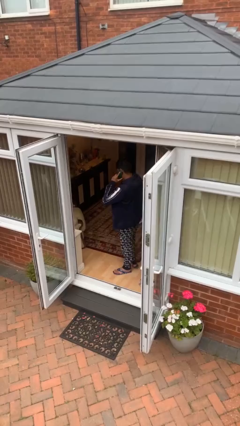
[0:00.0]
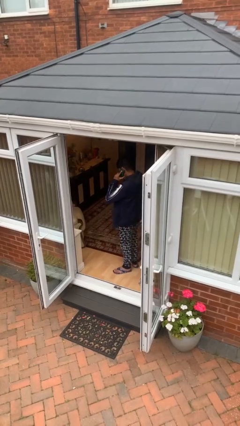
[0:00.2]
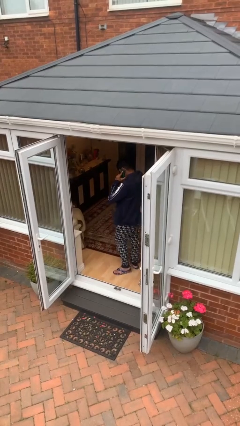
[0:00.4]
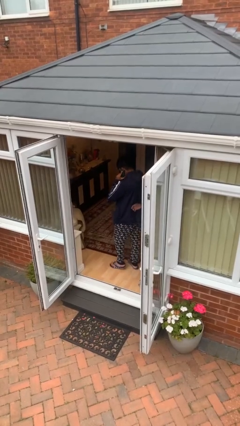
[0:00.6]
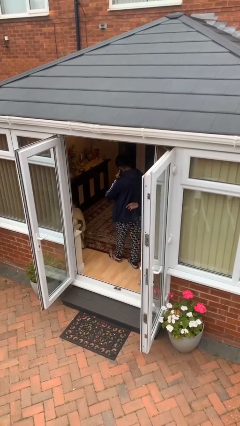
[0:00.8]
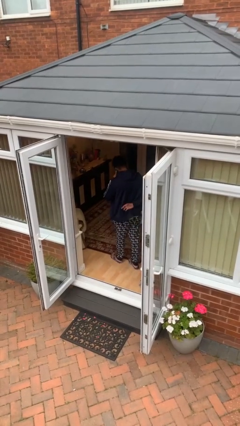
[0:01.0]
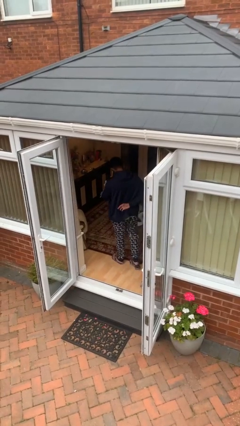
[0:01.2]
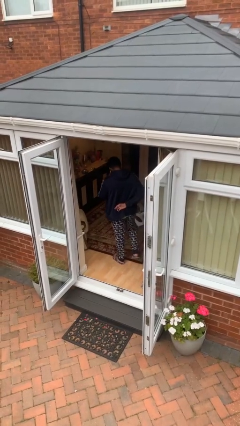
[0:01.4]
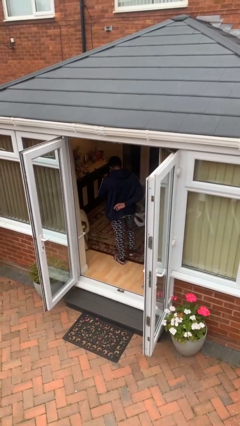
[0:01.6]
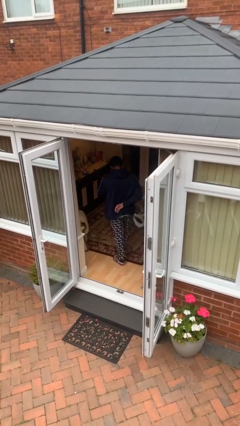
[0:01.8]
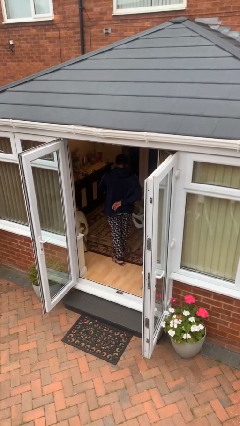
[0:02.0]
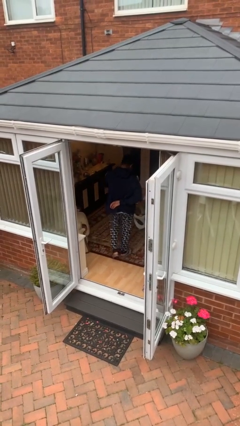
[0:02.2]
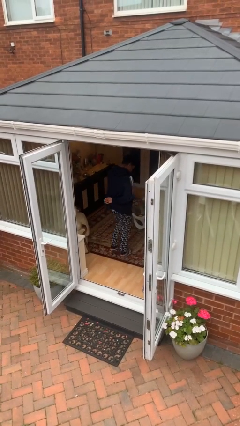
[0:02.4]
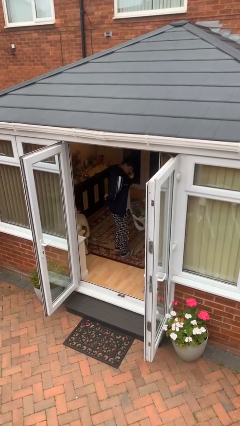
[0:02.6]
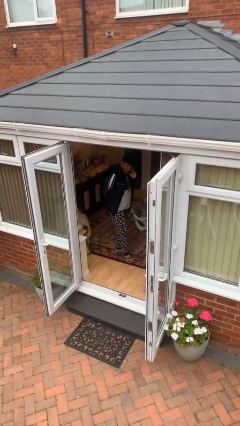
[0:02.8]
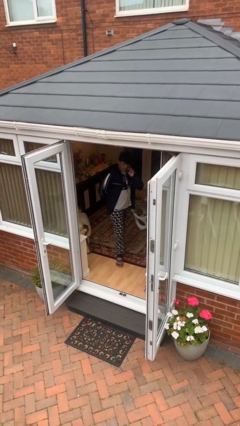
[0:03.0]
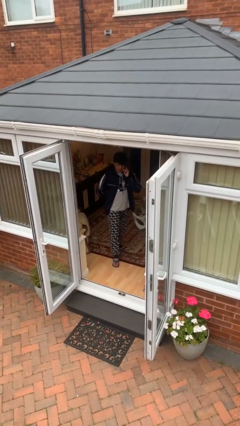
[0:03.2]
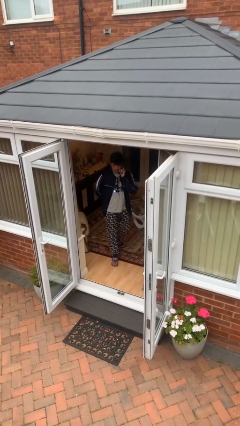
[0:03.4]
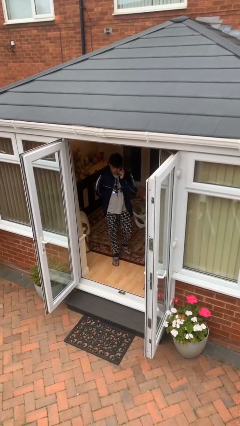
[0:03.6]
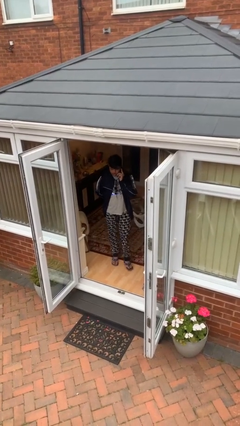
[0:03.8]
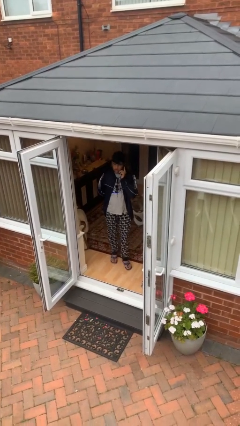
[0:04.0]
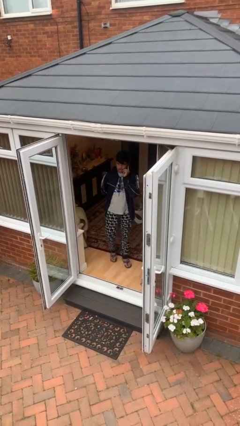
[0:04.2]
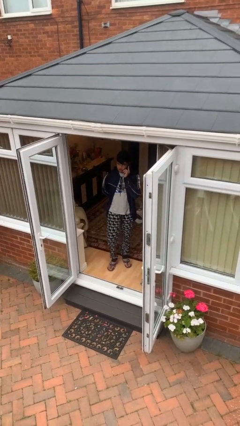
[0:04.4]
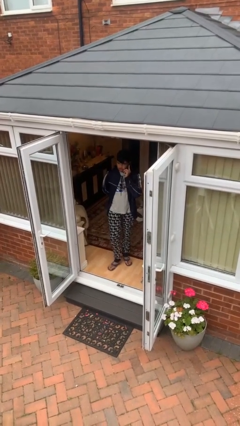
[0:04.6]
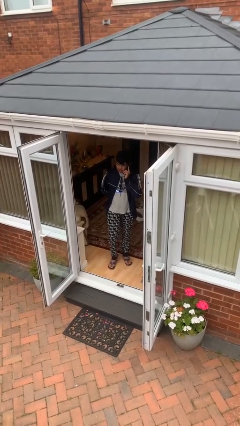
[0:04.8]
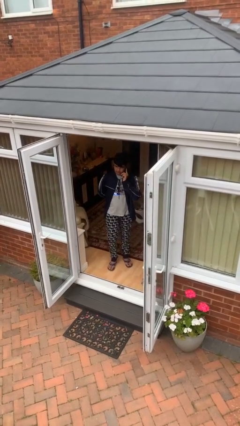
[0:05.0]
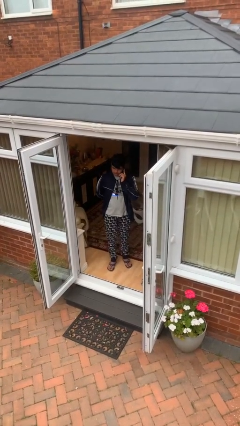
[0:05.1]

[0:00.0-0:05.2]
person talks on phone

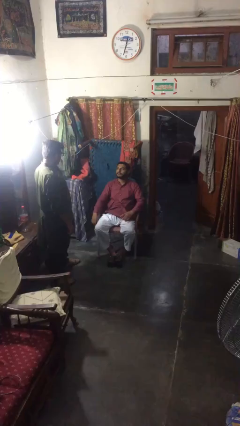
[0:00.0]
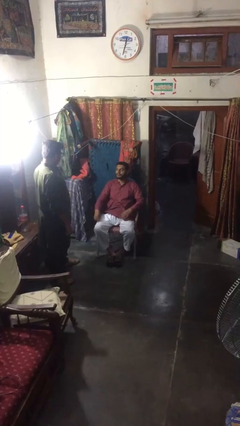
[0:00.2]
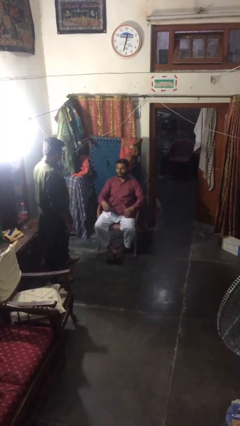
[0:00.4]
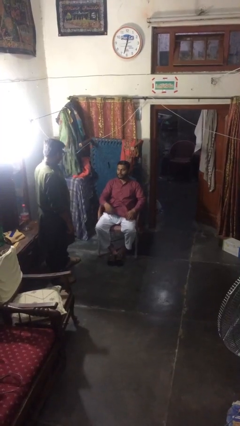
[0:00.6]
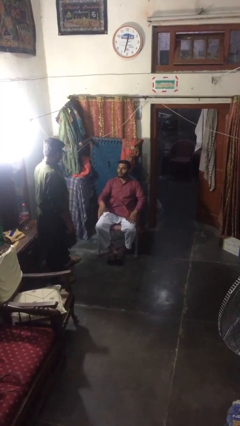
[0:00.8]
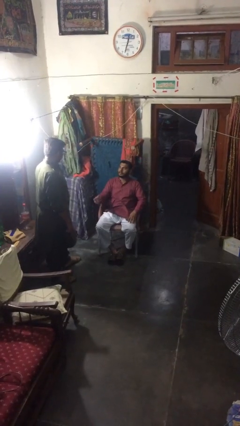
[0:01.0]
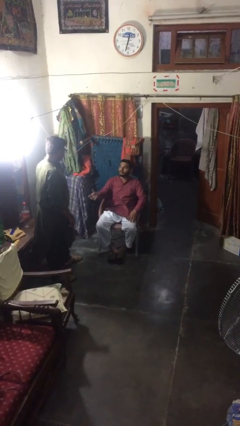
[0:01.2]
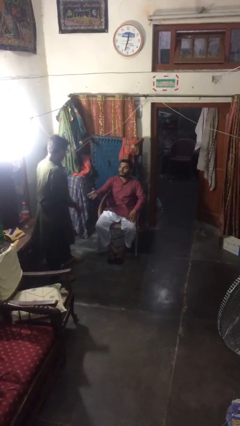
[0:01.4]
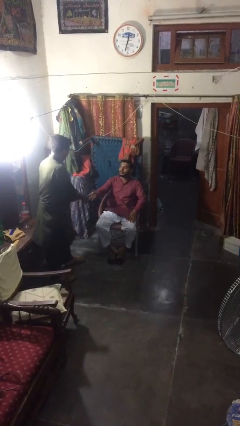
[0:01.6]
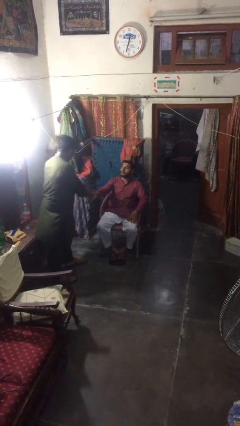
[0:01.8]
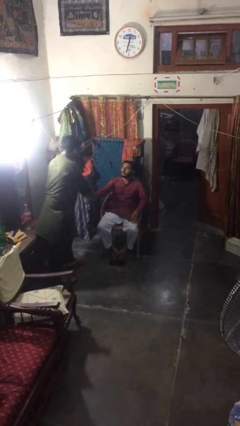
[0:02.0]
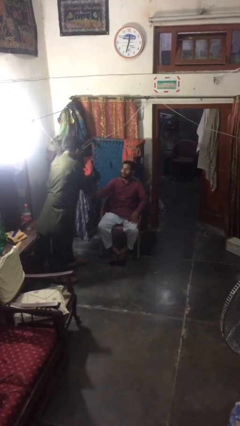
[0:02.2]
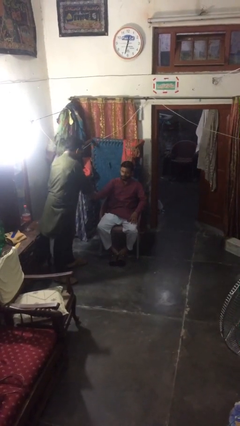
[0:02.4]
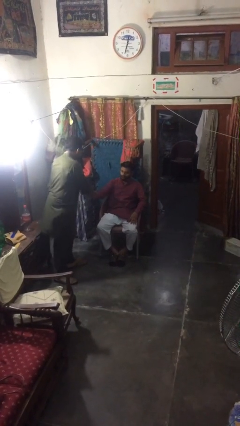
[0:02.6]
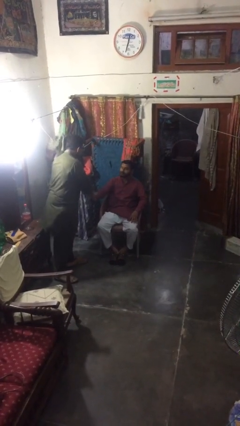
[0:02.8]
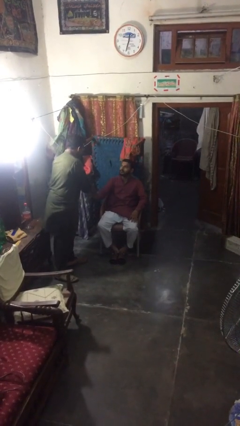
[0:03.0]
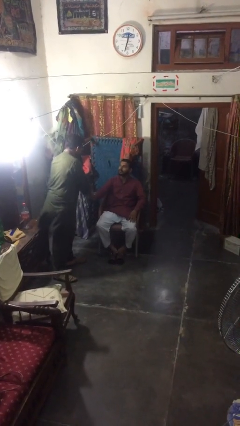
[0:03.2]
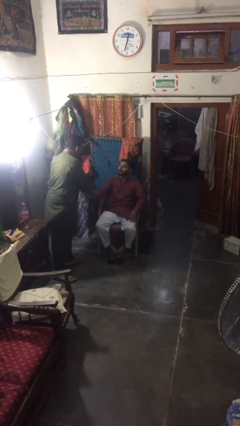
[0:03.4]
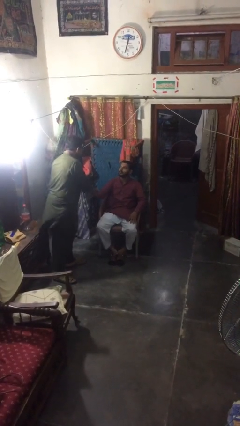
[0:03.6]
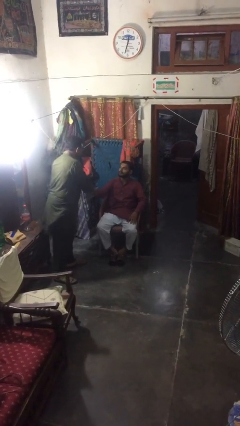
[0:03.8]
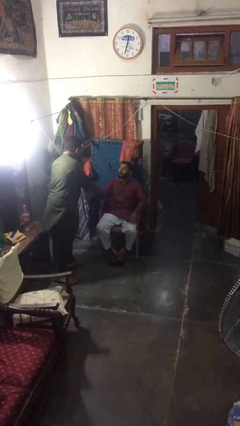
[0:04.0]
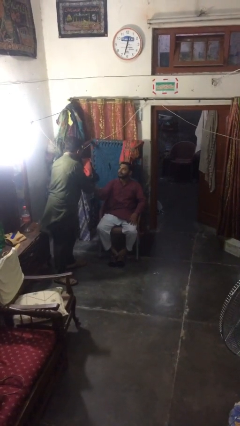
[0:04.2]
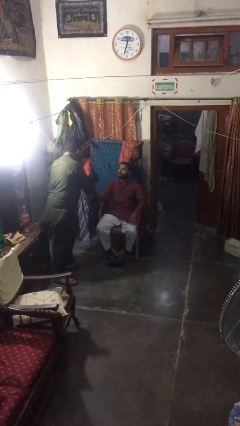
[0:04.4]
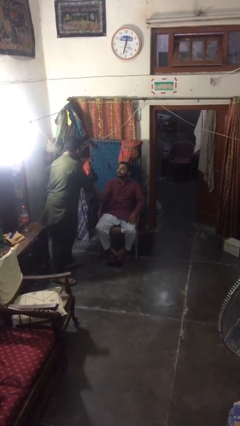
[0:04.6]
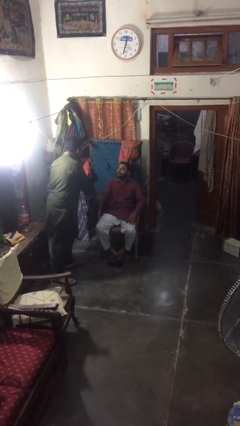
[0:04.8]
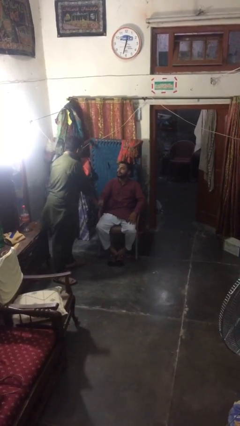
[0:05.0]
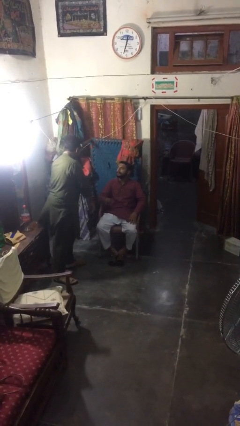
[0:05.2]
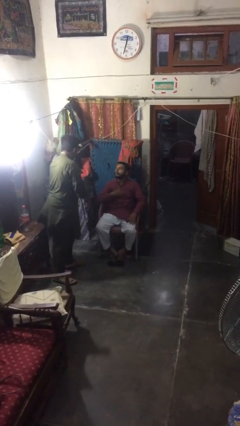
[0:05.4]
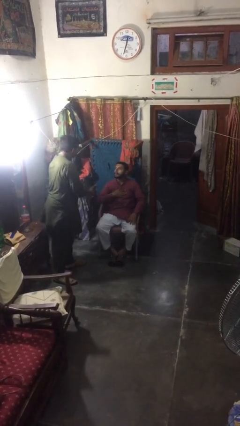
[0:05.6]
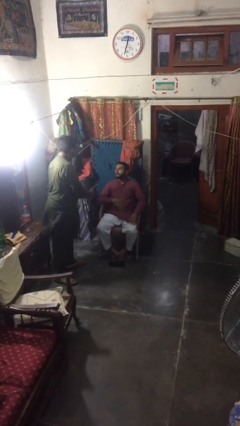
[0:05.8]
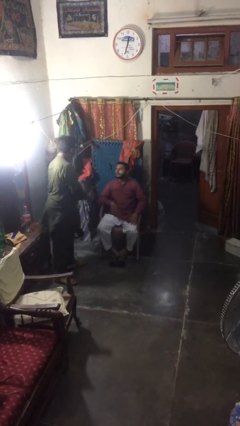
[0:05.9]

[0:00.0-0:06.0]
person shakes hand

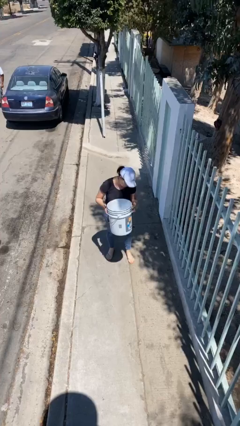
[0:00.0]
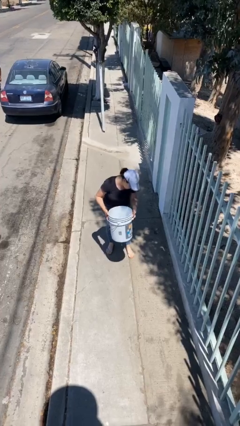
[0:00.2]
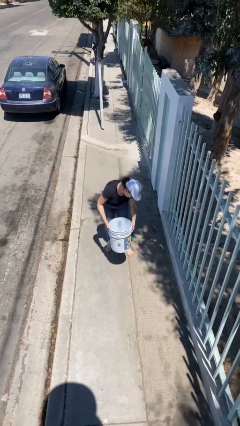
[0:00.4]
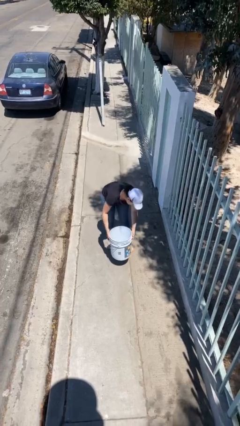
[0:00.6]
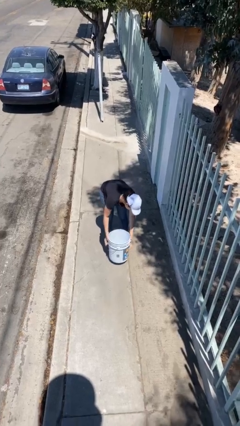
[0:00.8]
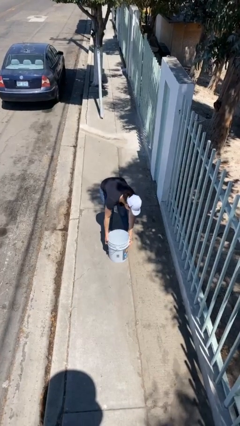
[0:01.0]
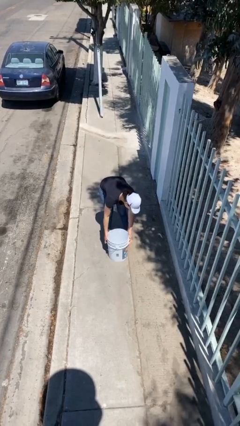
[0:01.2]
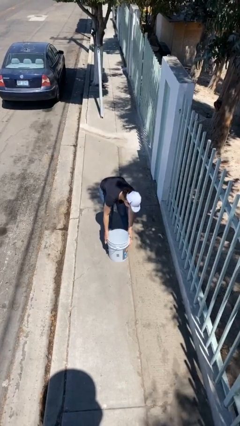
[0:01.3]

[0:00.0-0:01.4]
person puts down object on floor

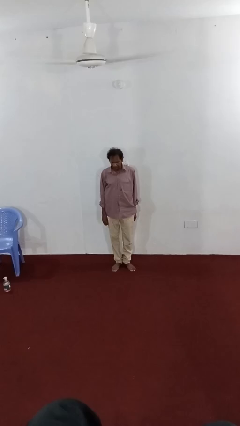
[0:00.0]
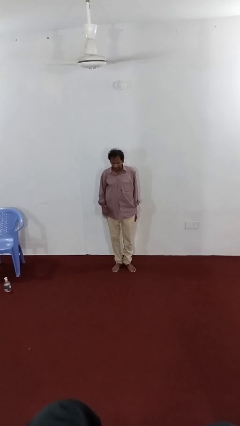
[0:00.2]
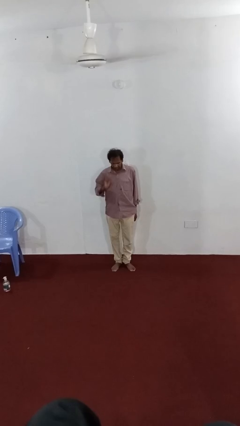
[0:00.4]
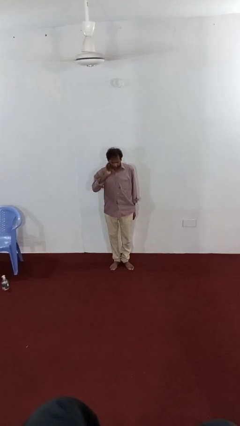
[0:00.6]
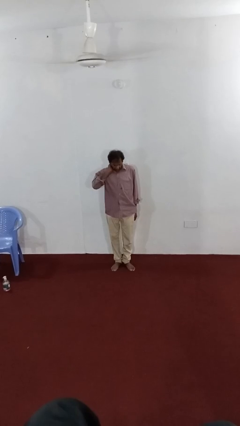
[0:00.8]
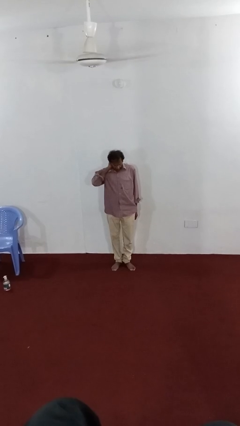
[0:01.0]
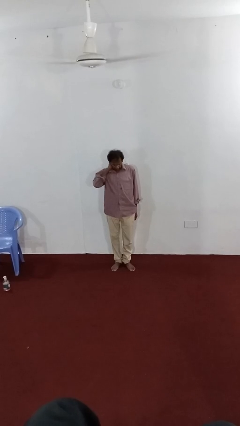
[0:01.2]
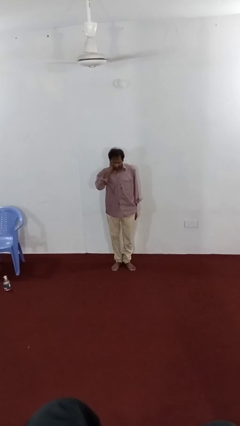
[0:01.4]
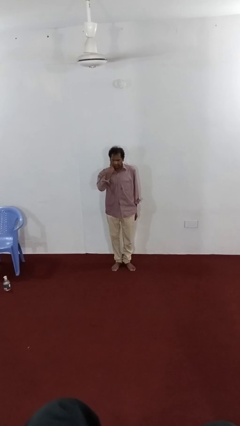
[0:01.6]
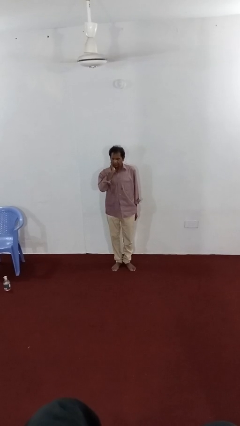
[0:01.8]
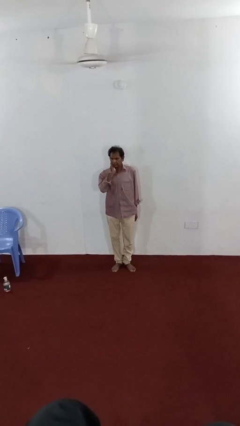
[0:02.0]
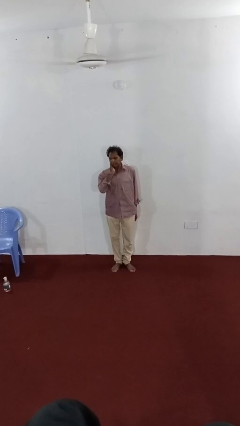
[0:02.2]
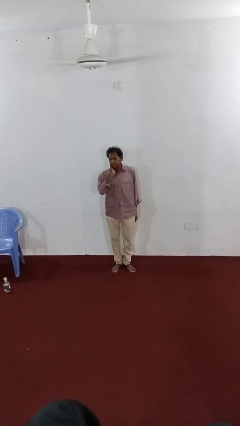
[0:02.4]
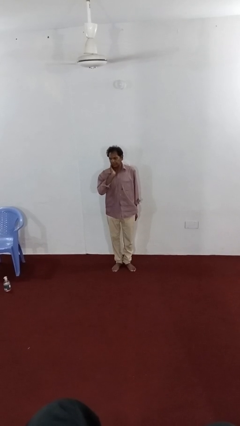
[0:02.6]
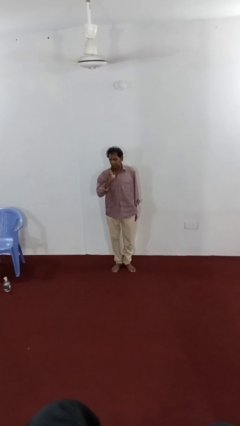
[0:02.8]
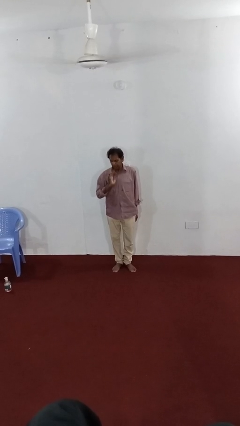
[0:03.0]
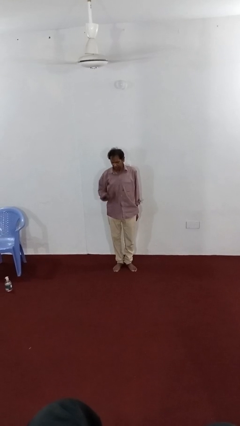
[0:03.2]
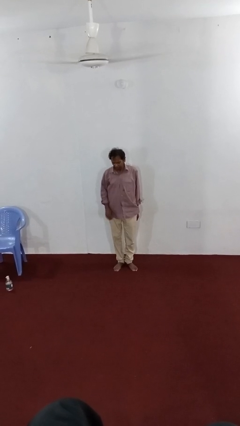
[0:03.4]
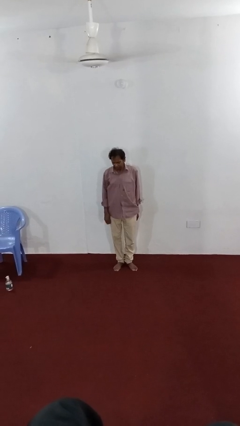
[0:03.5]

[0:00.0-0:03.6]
person rubs neck

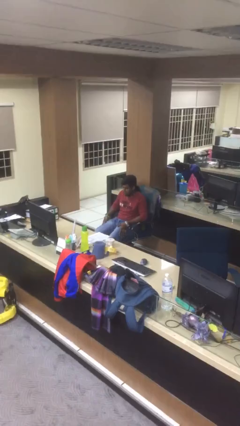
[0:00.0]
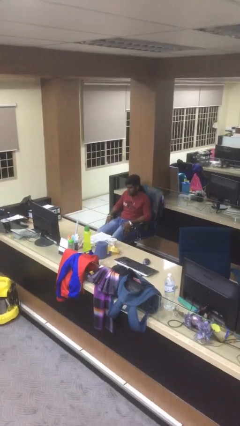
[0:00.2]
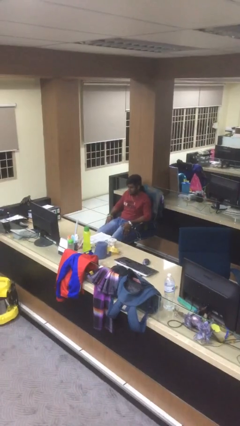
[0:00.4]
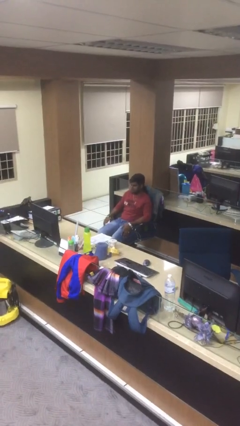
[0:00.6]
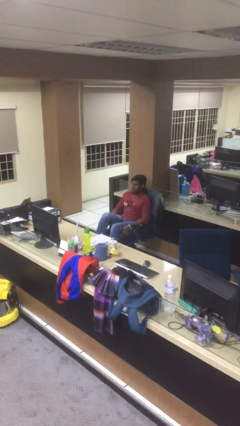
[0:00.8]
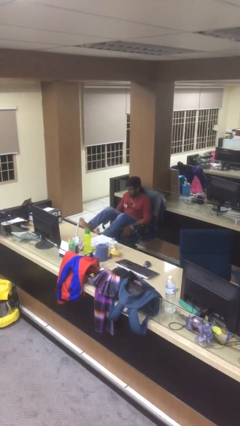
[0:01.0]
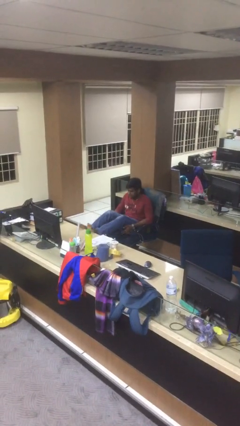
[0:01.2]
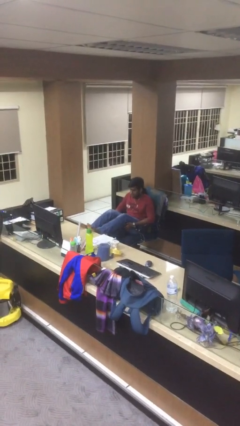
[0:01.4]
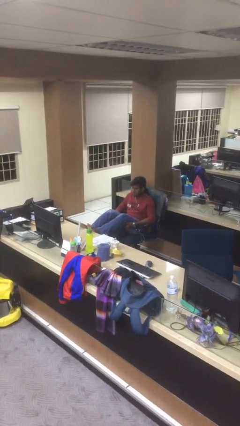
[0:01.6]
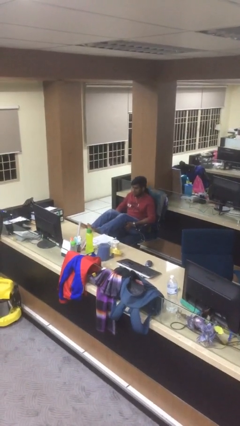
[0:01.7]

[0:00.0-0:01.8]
person puts feet up
